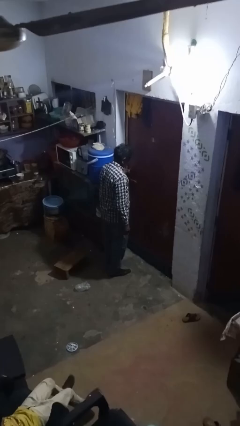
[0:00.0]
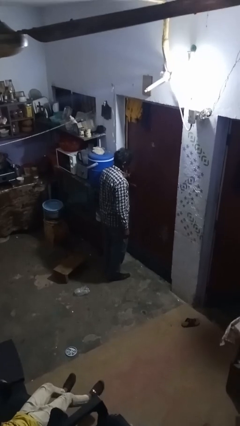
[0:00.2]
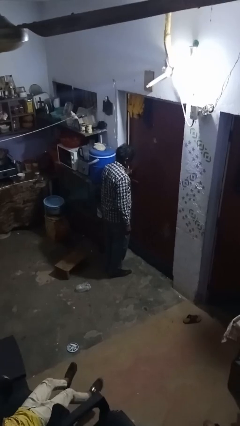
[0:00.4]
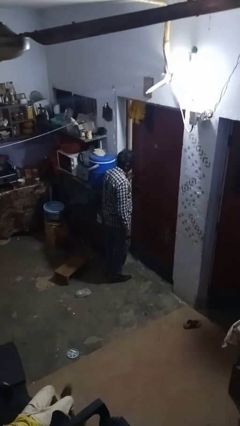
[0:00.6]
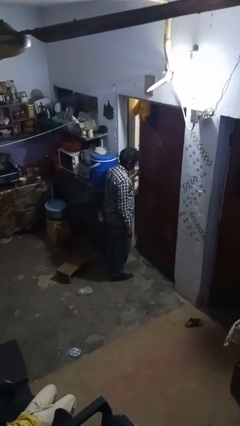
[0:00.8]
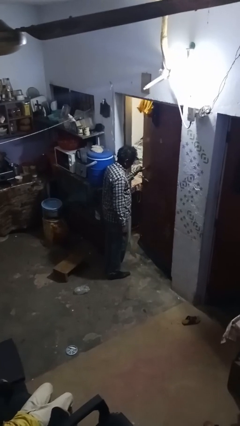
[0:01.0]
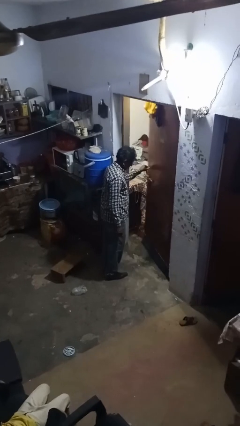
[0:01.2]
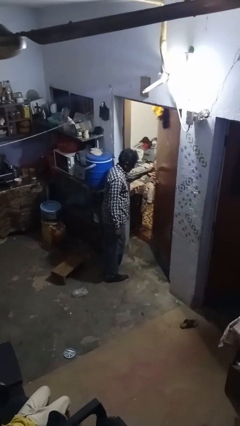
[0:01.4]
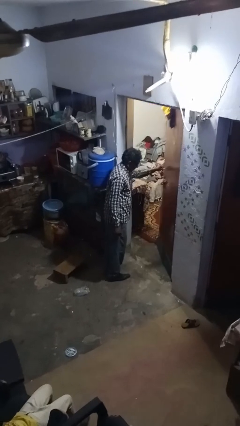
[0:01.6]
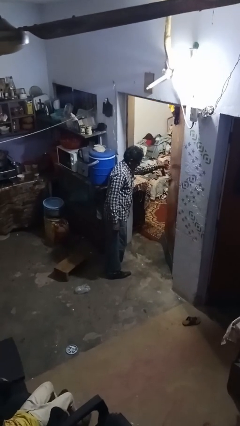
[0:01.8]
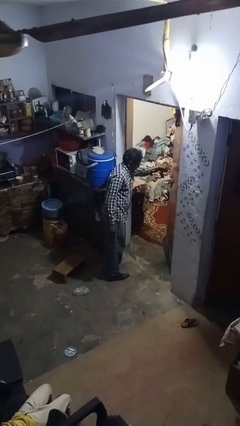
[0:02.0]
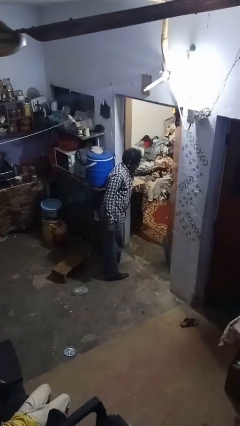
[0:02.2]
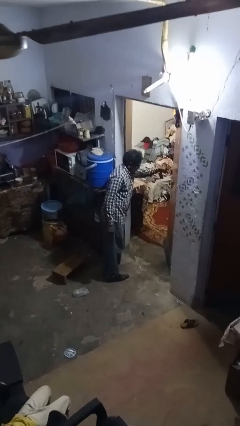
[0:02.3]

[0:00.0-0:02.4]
person opens facility door

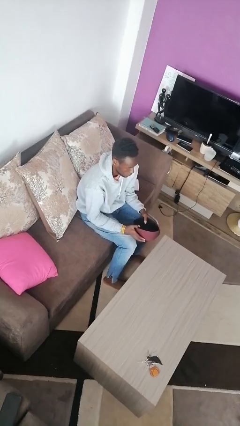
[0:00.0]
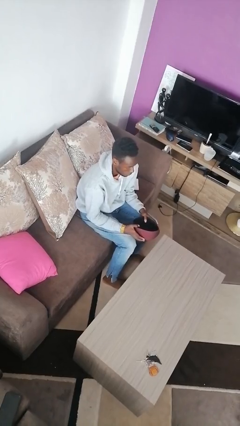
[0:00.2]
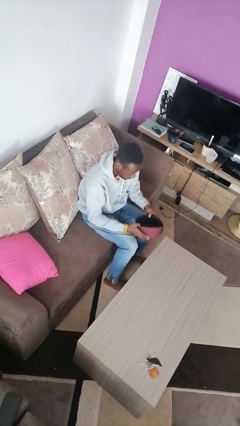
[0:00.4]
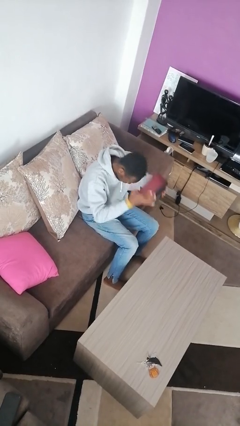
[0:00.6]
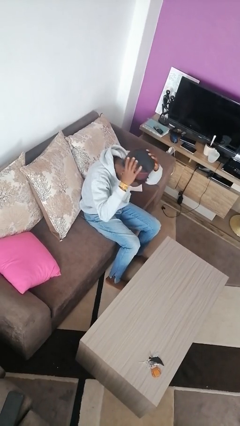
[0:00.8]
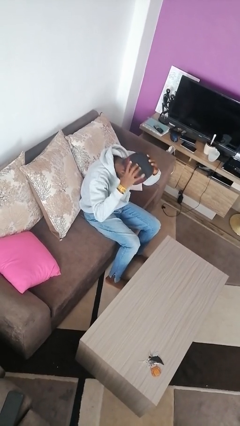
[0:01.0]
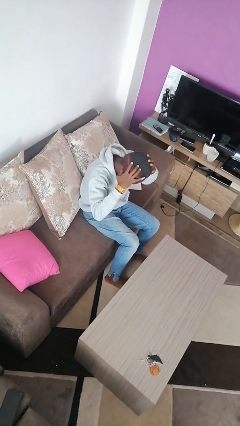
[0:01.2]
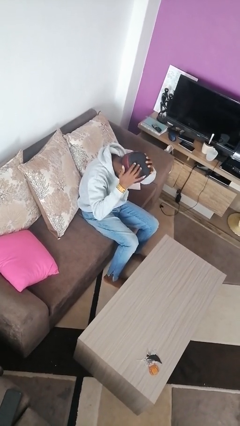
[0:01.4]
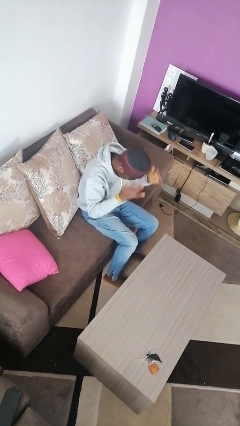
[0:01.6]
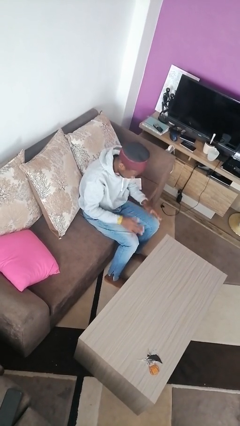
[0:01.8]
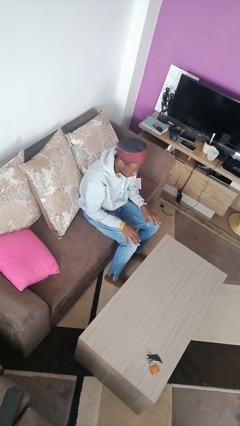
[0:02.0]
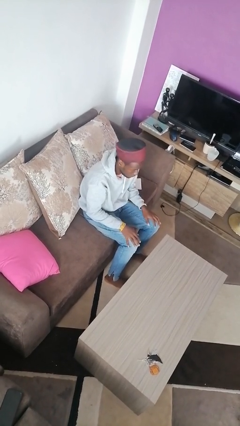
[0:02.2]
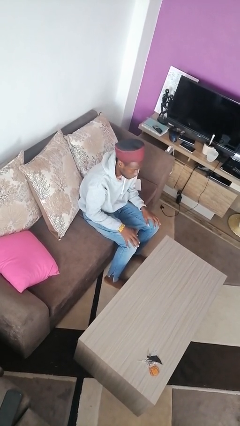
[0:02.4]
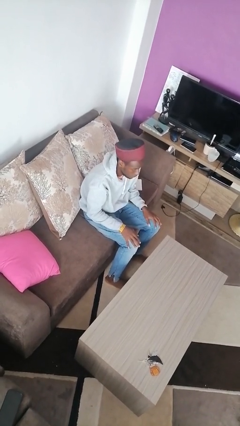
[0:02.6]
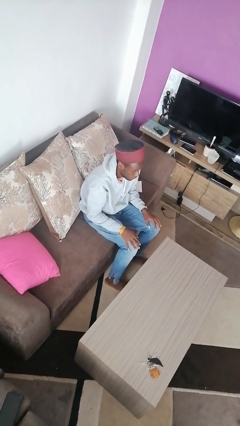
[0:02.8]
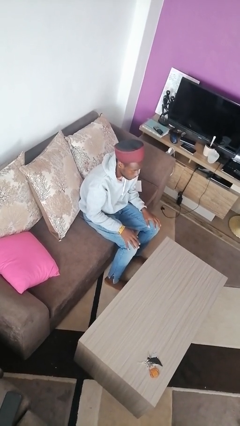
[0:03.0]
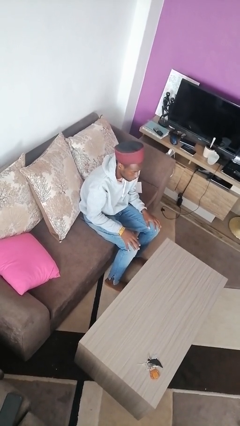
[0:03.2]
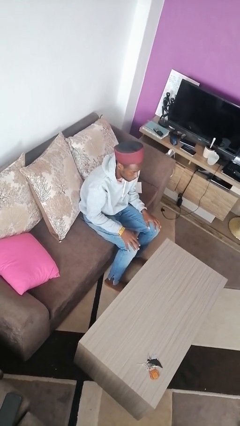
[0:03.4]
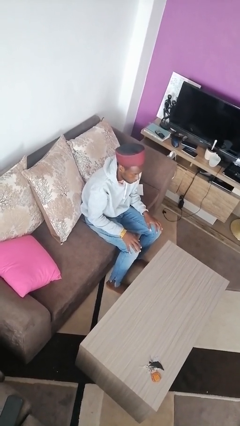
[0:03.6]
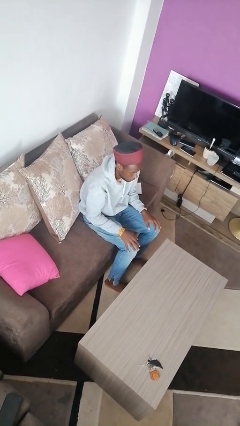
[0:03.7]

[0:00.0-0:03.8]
person puts on hat

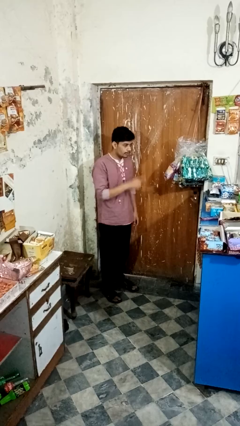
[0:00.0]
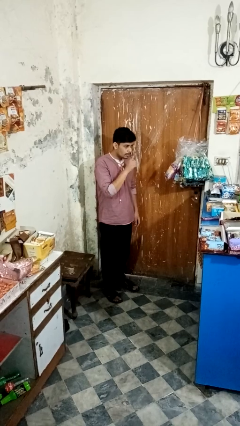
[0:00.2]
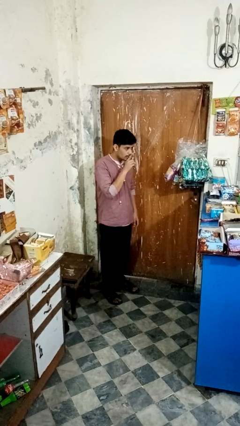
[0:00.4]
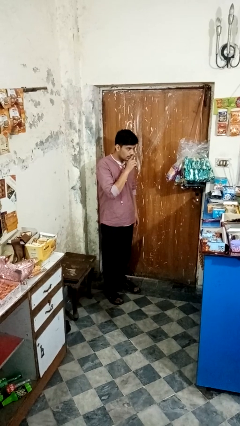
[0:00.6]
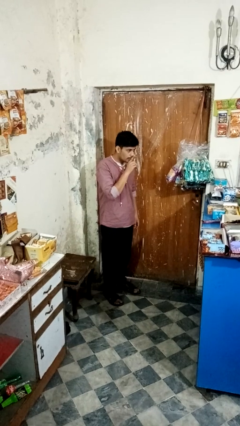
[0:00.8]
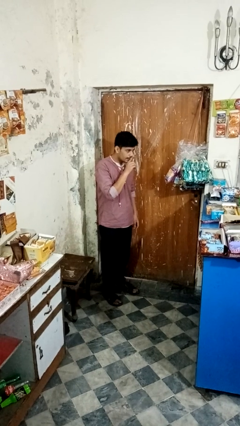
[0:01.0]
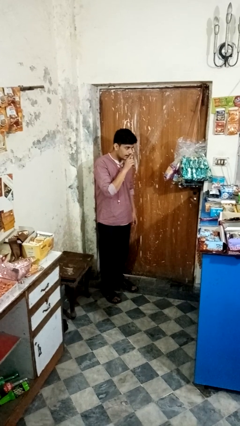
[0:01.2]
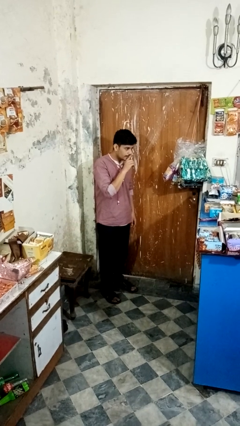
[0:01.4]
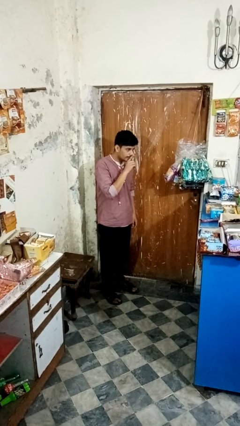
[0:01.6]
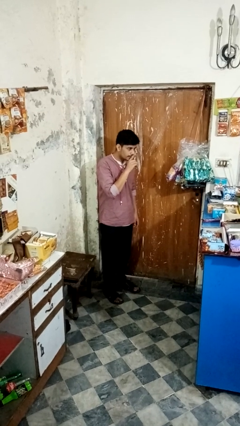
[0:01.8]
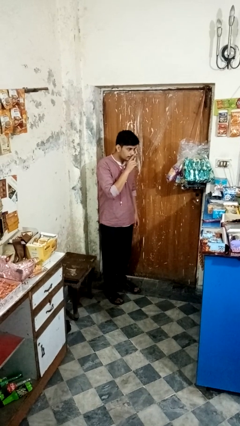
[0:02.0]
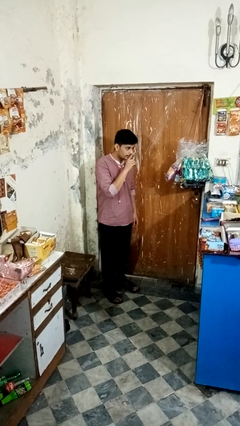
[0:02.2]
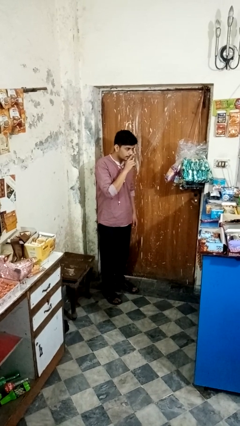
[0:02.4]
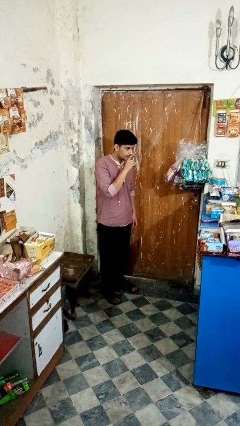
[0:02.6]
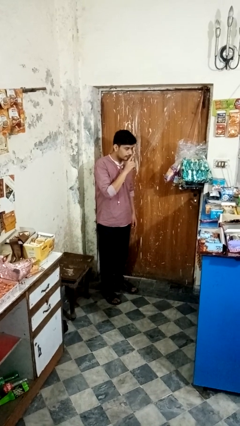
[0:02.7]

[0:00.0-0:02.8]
person gestures be quiet

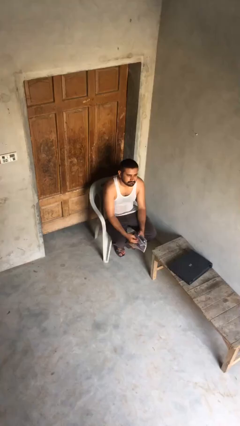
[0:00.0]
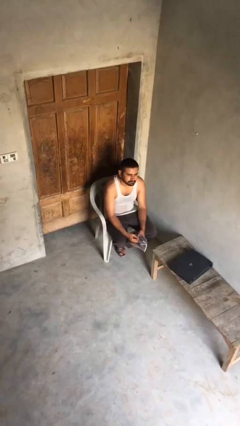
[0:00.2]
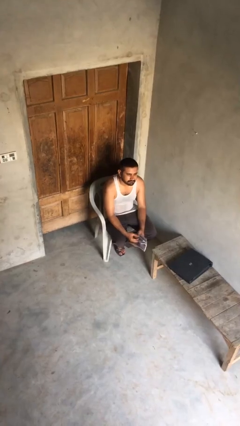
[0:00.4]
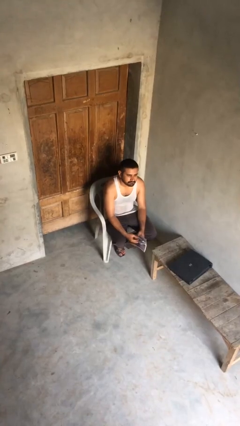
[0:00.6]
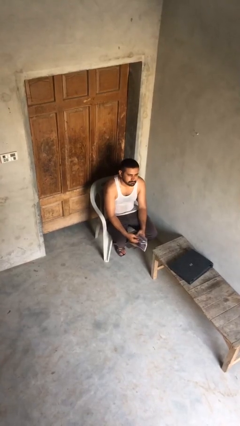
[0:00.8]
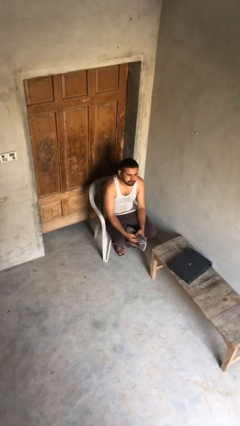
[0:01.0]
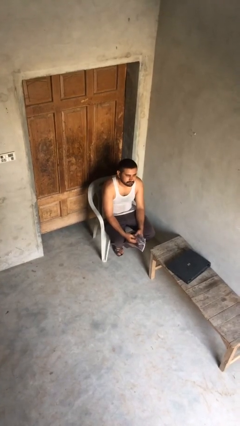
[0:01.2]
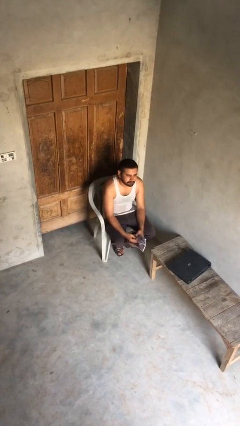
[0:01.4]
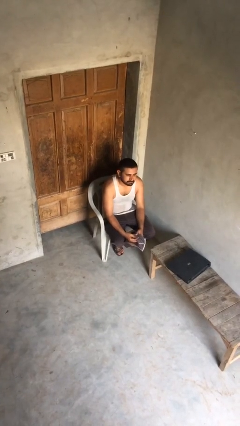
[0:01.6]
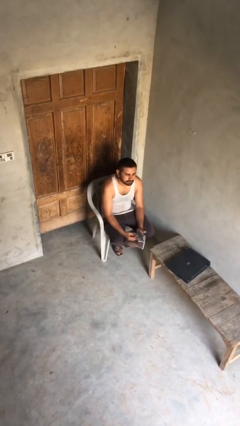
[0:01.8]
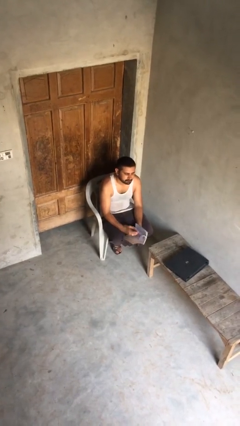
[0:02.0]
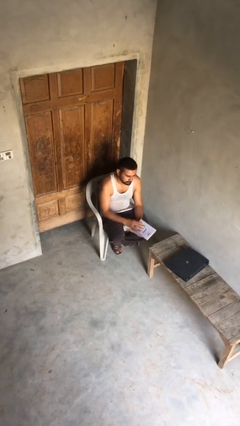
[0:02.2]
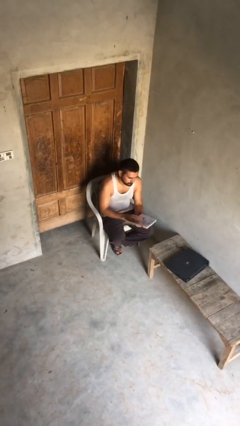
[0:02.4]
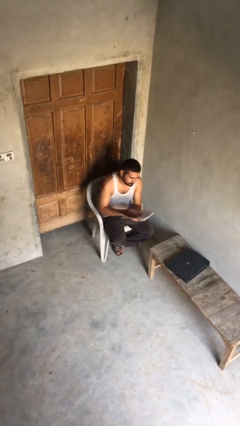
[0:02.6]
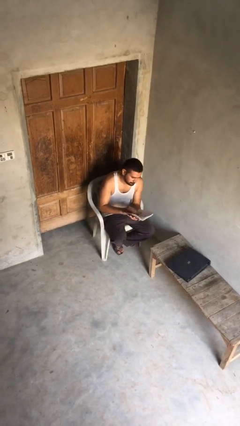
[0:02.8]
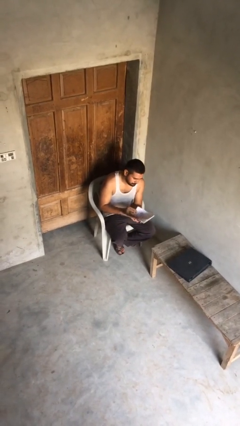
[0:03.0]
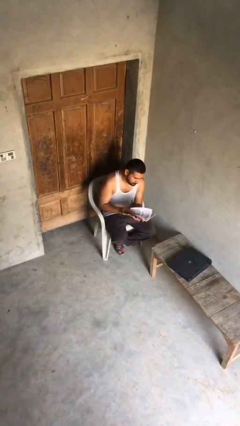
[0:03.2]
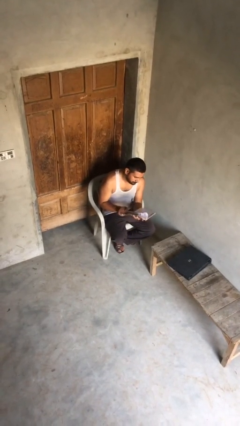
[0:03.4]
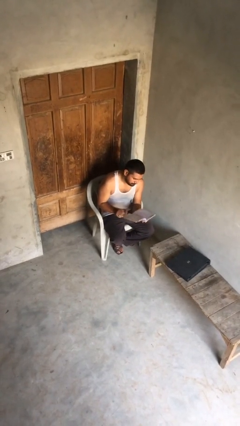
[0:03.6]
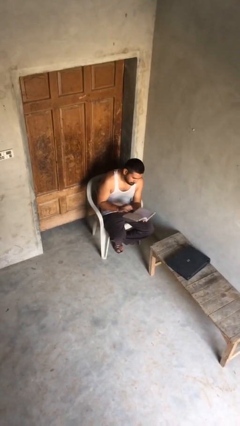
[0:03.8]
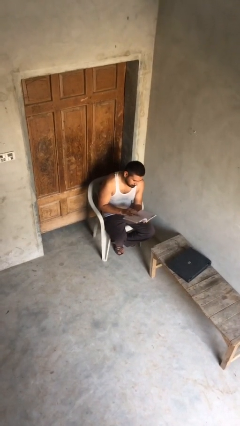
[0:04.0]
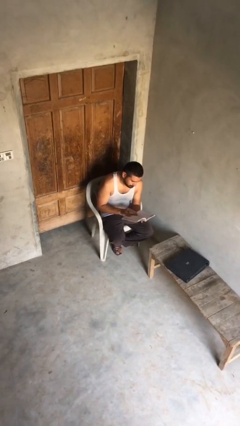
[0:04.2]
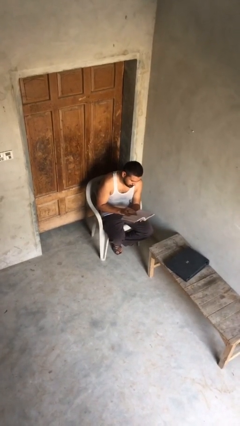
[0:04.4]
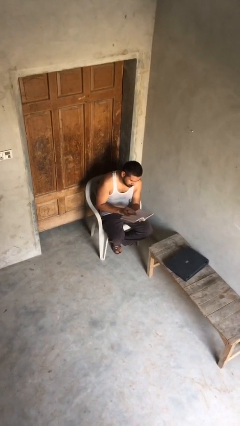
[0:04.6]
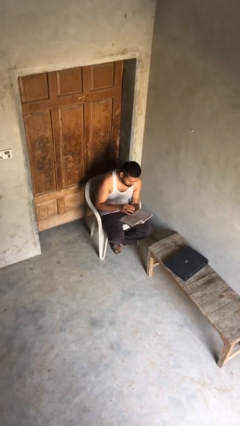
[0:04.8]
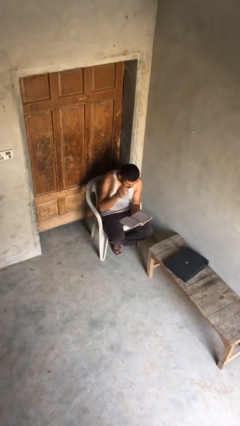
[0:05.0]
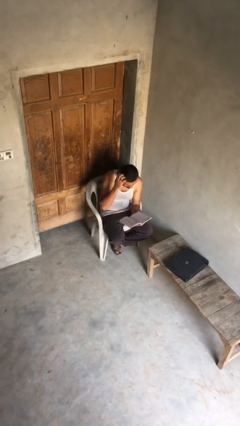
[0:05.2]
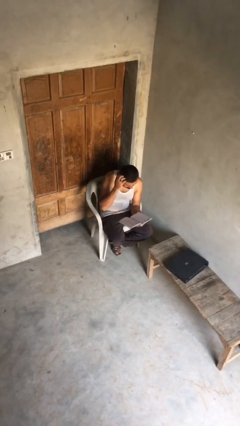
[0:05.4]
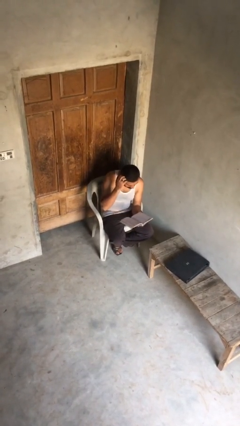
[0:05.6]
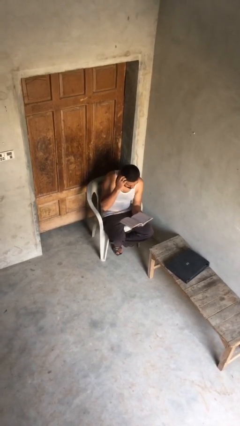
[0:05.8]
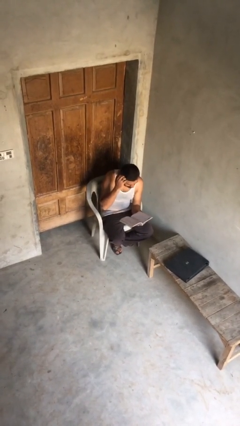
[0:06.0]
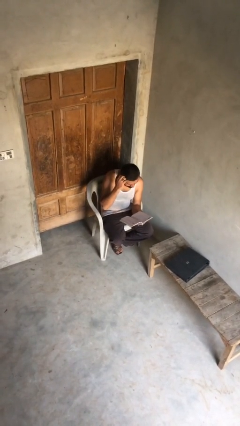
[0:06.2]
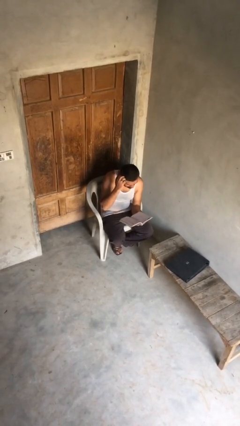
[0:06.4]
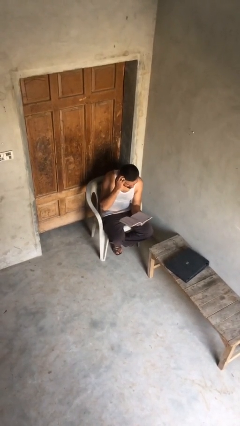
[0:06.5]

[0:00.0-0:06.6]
person reads document

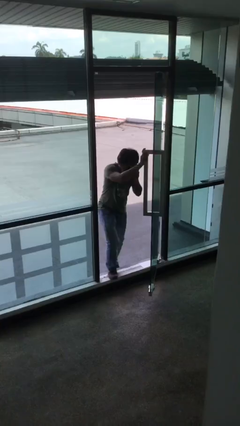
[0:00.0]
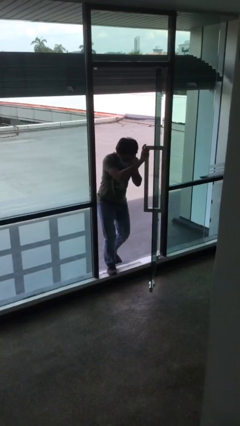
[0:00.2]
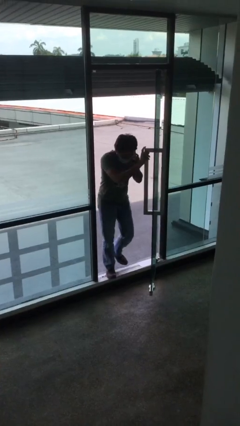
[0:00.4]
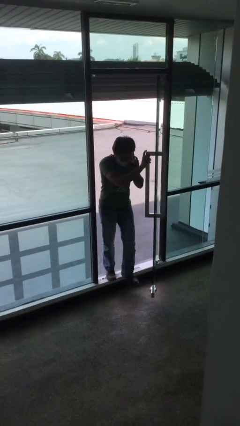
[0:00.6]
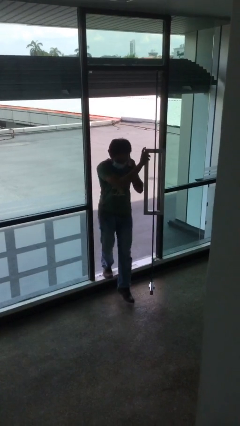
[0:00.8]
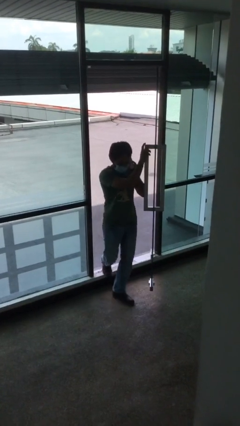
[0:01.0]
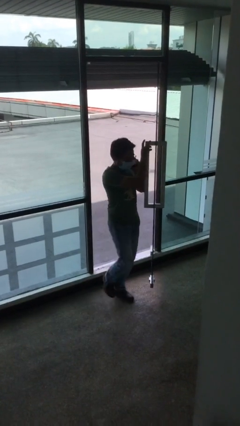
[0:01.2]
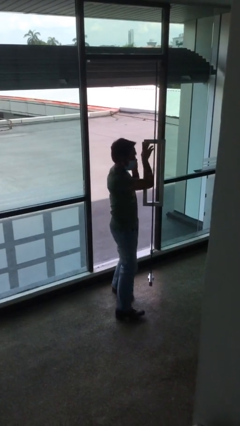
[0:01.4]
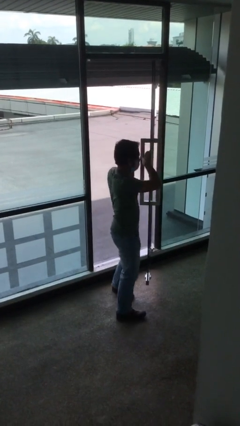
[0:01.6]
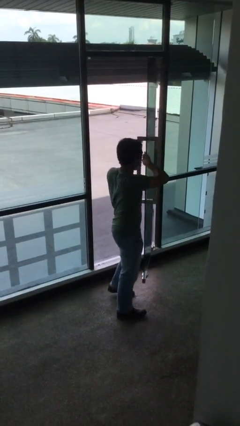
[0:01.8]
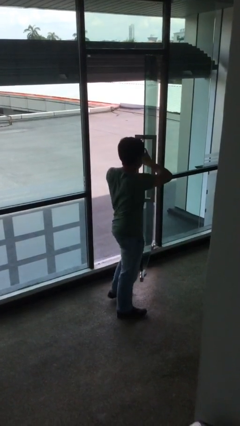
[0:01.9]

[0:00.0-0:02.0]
person enters scene through structure
